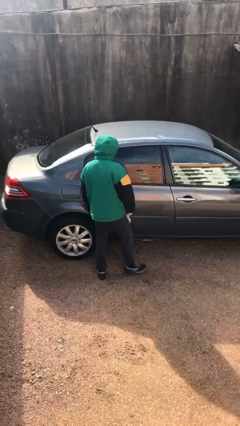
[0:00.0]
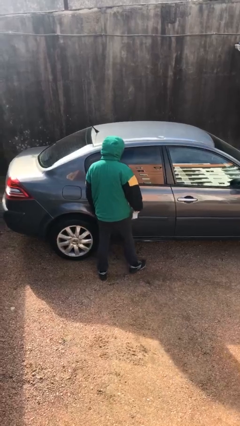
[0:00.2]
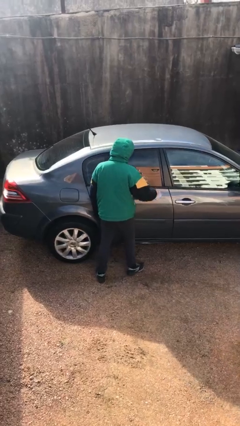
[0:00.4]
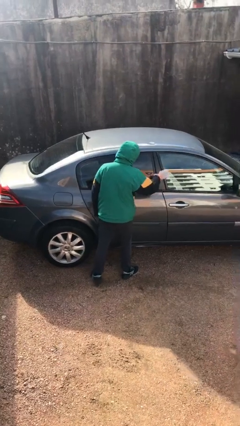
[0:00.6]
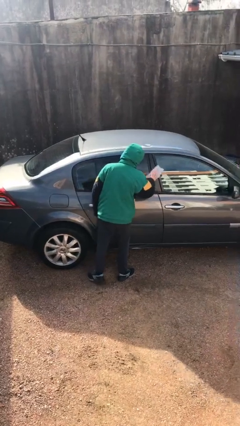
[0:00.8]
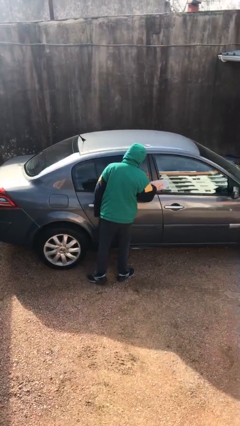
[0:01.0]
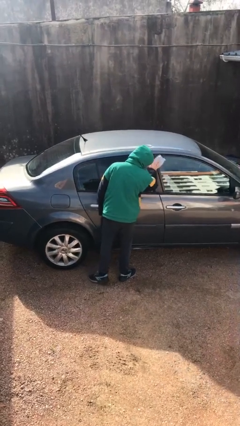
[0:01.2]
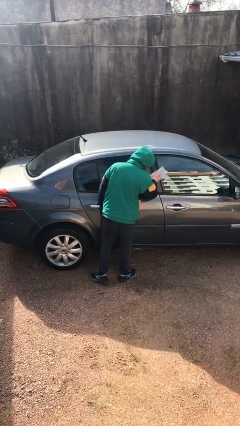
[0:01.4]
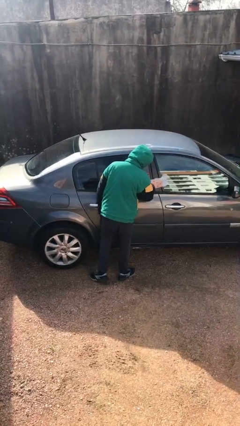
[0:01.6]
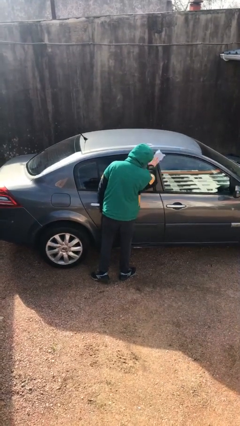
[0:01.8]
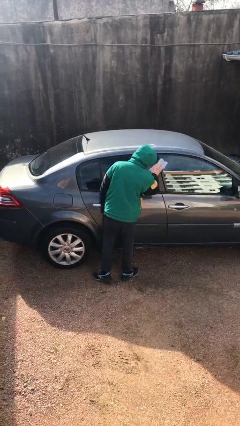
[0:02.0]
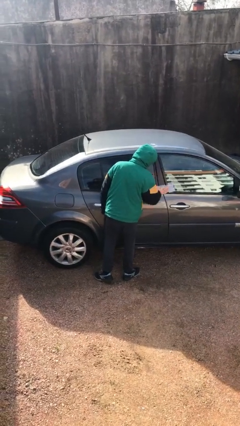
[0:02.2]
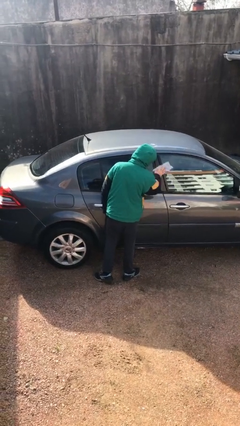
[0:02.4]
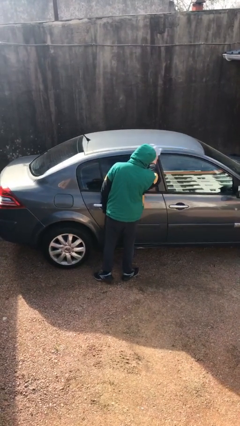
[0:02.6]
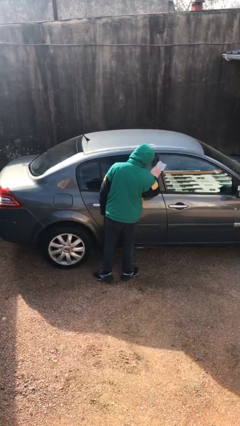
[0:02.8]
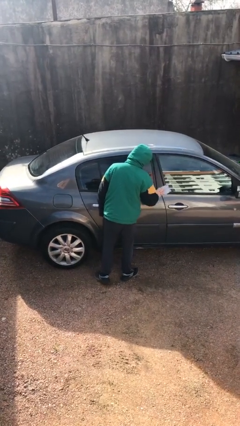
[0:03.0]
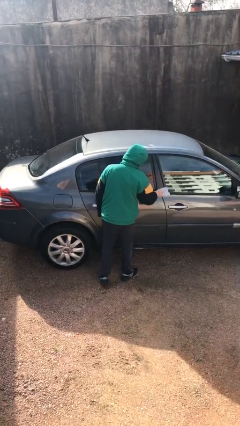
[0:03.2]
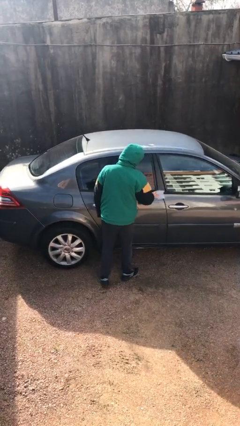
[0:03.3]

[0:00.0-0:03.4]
person polishes car with rag

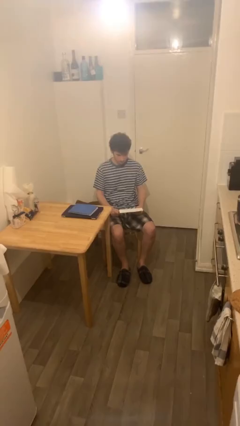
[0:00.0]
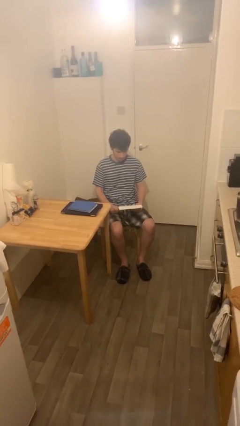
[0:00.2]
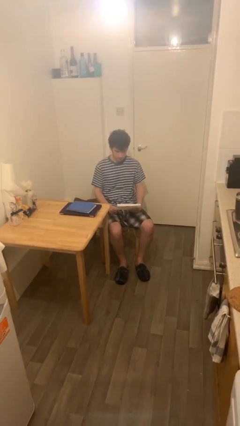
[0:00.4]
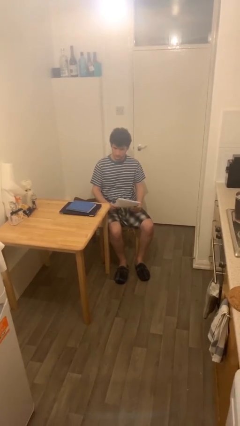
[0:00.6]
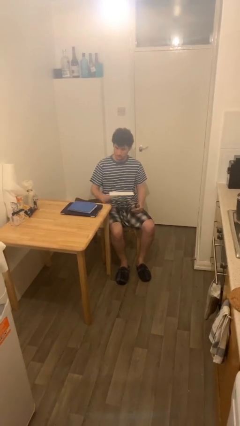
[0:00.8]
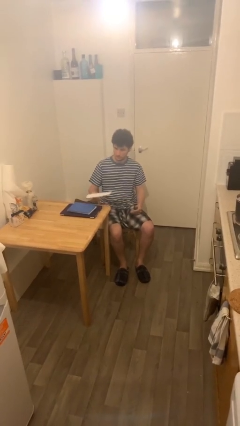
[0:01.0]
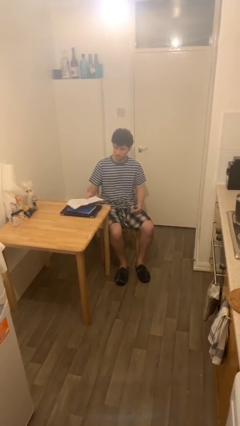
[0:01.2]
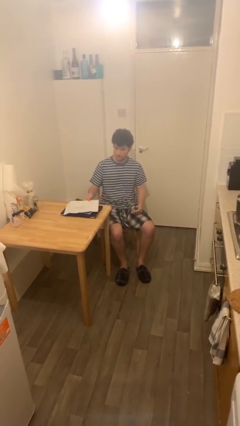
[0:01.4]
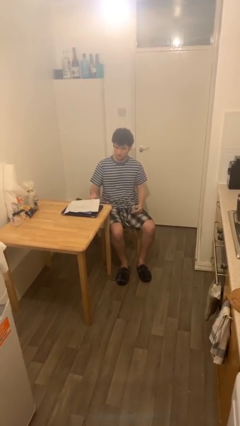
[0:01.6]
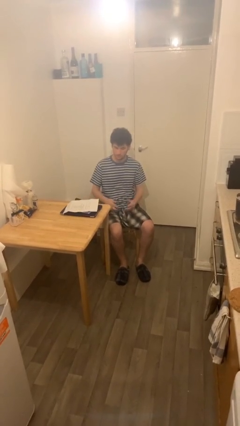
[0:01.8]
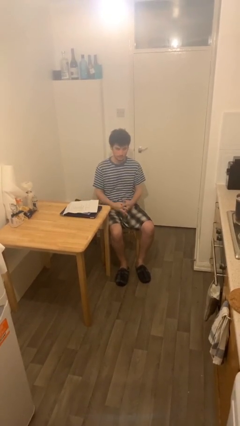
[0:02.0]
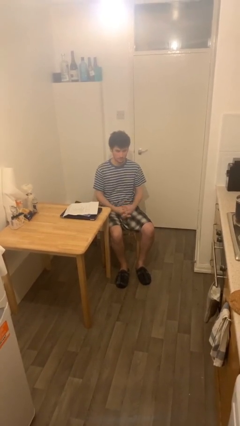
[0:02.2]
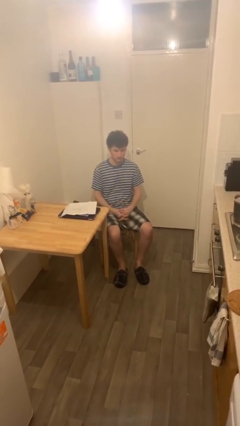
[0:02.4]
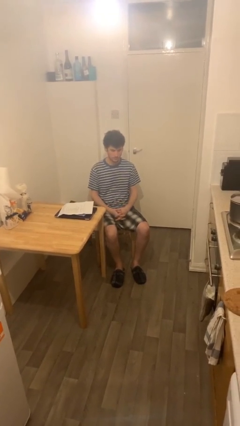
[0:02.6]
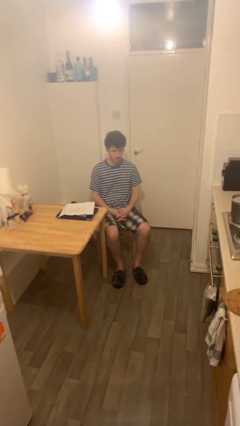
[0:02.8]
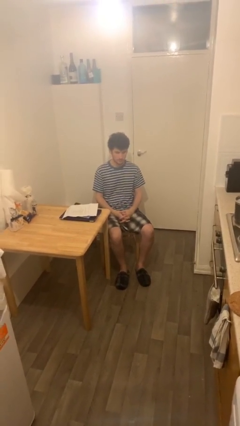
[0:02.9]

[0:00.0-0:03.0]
person puts down object on table

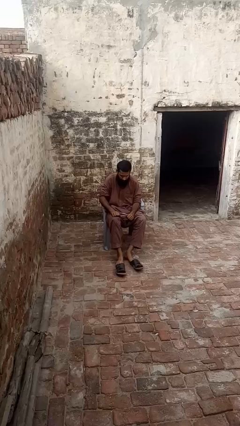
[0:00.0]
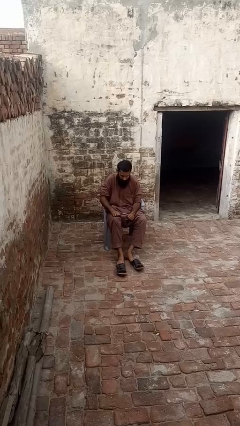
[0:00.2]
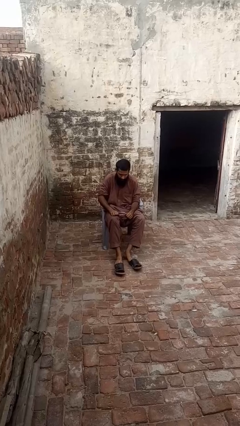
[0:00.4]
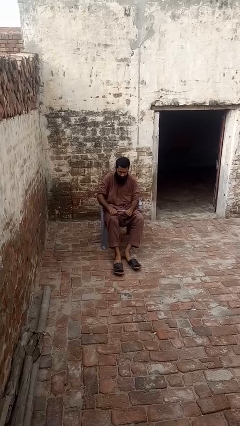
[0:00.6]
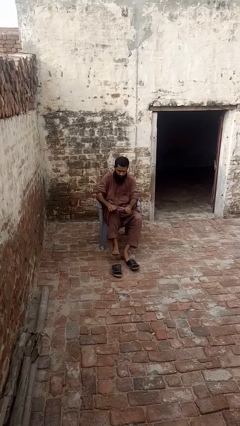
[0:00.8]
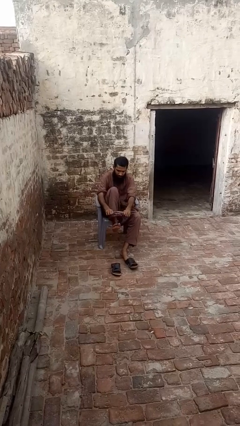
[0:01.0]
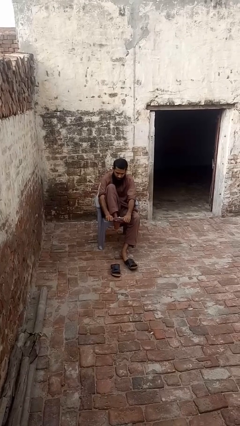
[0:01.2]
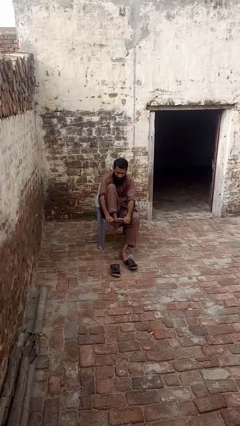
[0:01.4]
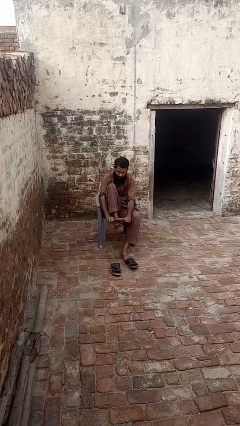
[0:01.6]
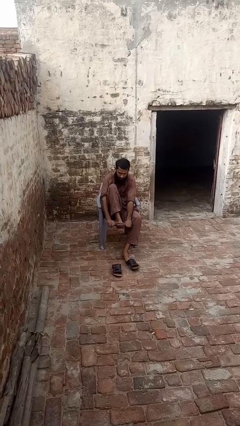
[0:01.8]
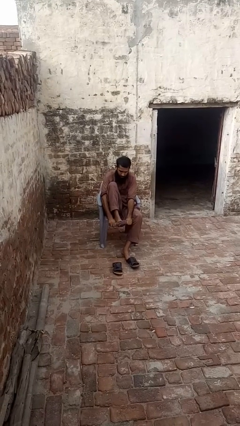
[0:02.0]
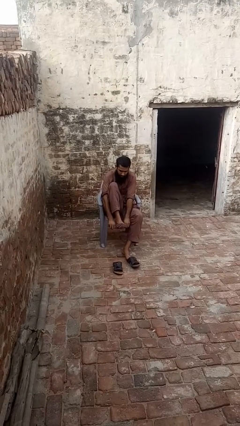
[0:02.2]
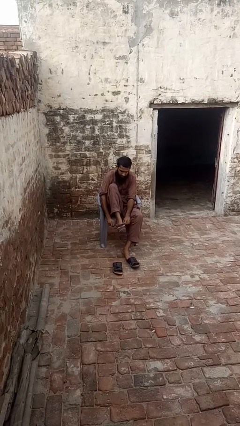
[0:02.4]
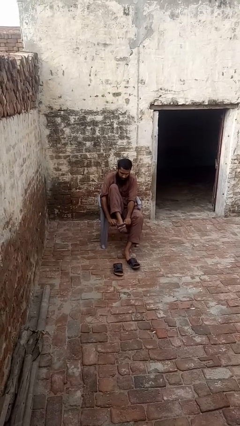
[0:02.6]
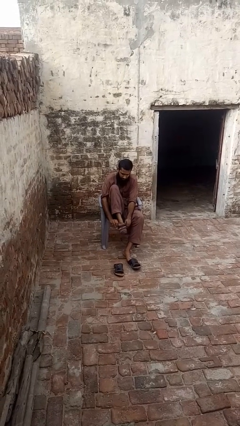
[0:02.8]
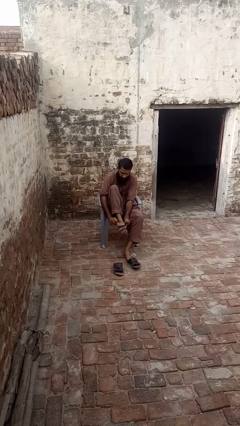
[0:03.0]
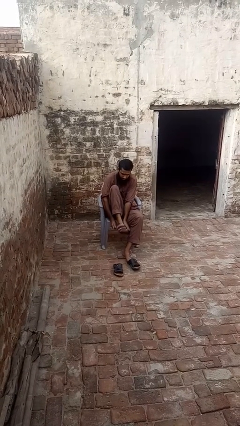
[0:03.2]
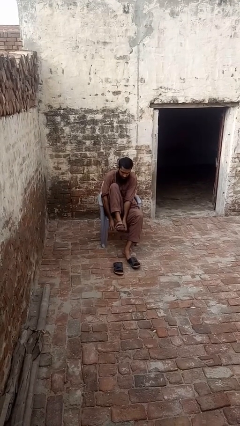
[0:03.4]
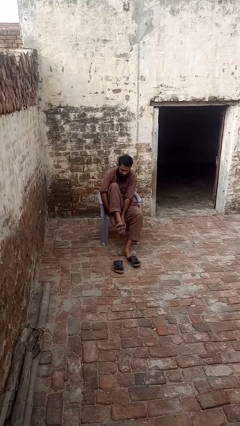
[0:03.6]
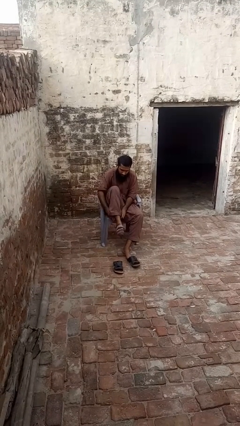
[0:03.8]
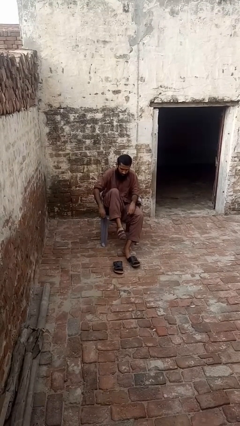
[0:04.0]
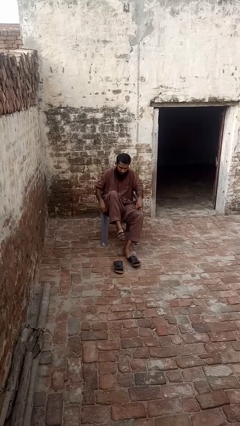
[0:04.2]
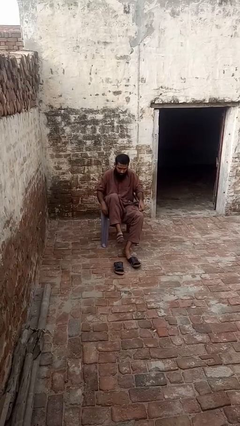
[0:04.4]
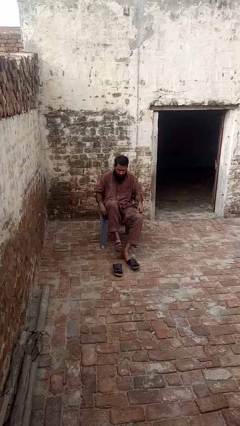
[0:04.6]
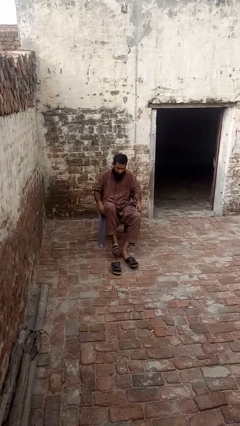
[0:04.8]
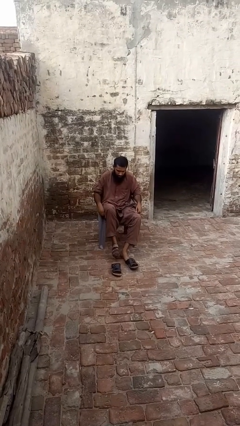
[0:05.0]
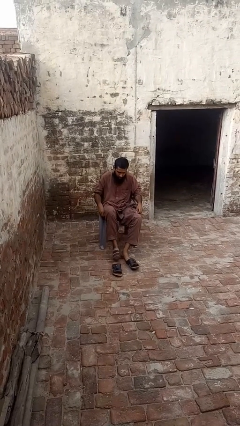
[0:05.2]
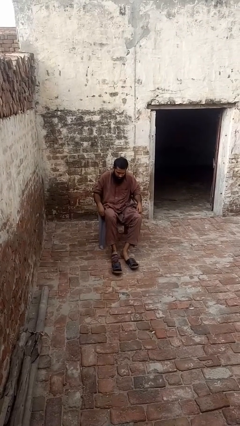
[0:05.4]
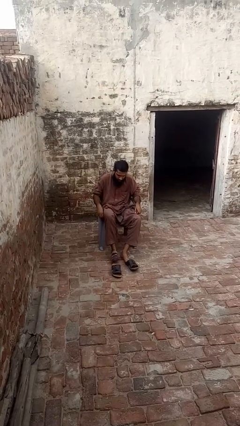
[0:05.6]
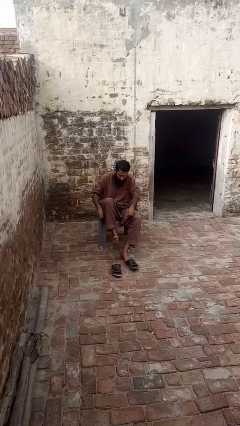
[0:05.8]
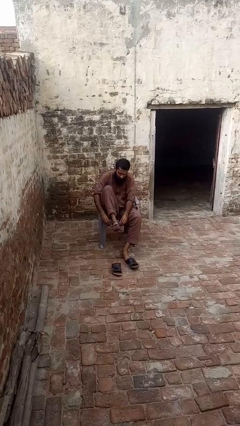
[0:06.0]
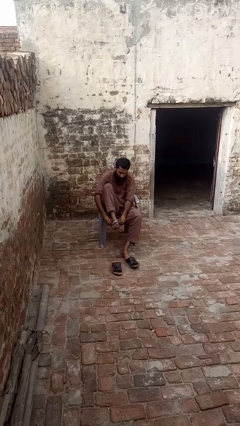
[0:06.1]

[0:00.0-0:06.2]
person puts on socks

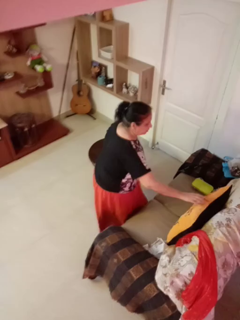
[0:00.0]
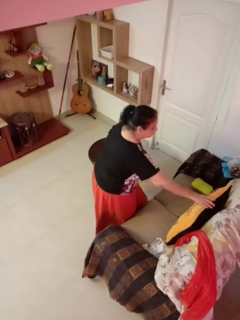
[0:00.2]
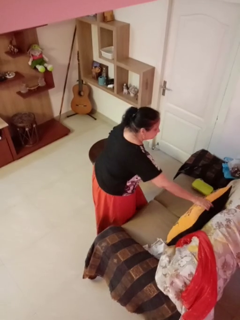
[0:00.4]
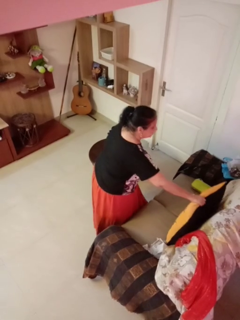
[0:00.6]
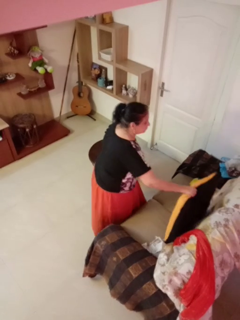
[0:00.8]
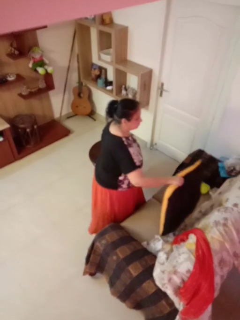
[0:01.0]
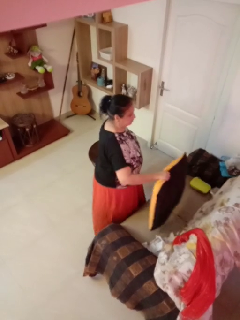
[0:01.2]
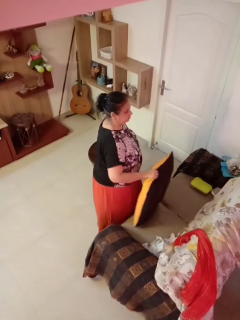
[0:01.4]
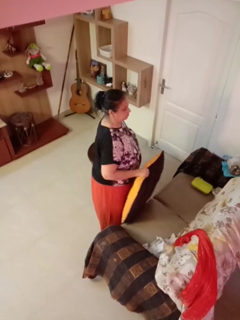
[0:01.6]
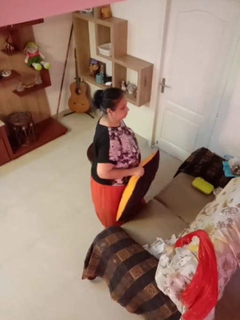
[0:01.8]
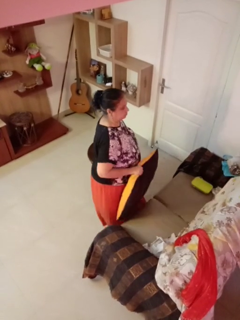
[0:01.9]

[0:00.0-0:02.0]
person picks up object from couch

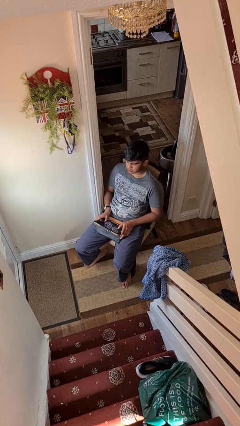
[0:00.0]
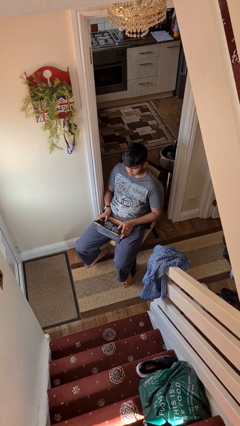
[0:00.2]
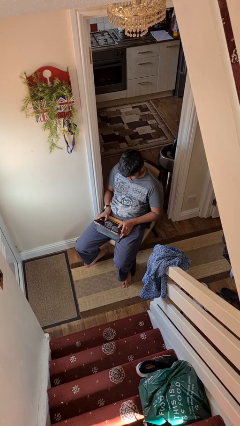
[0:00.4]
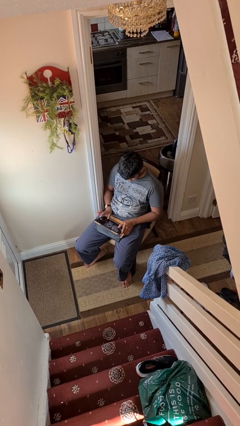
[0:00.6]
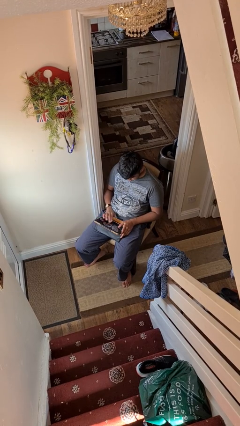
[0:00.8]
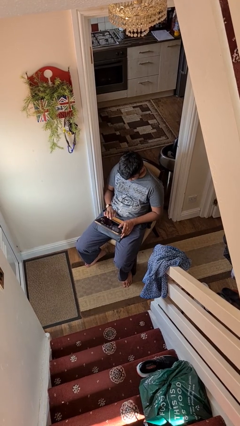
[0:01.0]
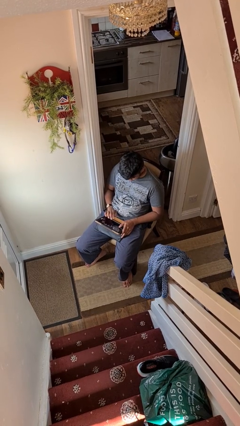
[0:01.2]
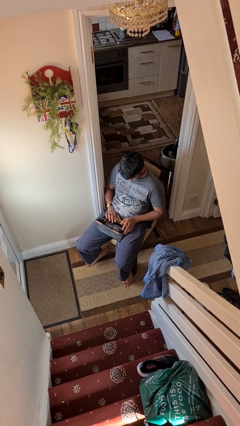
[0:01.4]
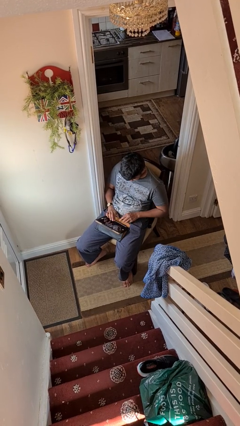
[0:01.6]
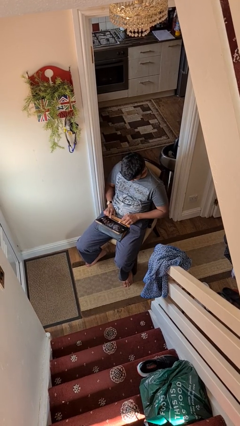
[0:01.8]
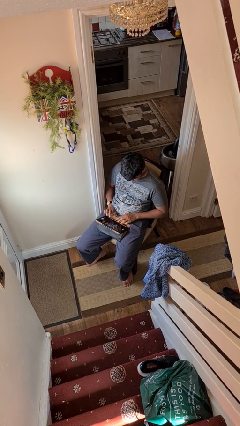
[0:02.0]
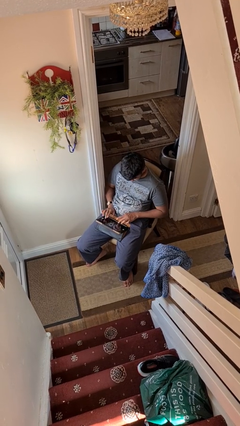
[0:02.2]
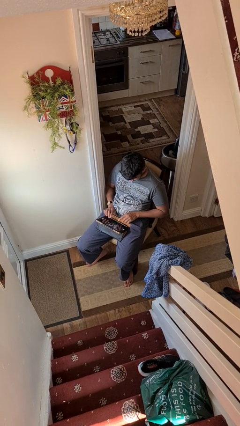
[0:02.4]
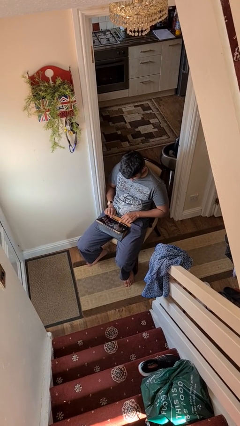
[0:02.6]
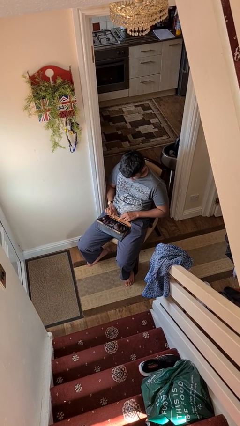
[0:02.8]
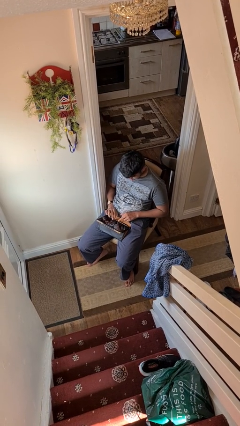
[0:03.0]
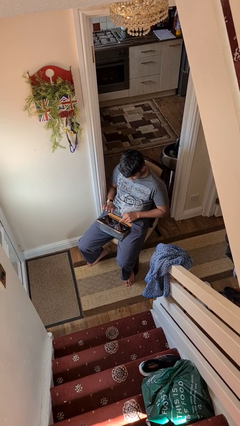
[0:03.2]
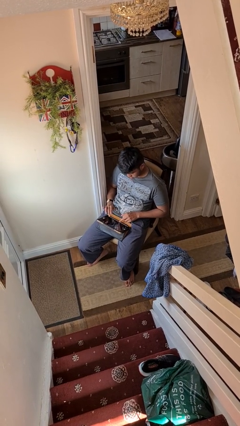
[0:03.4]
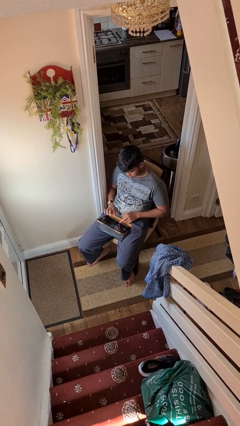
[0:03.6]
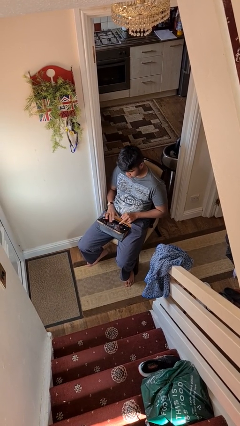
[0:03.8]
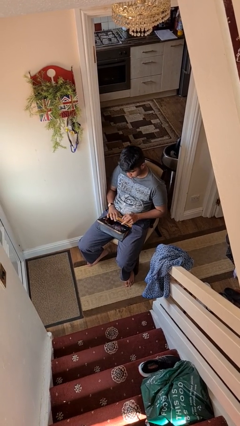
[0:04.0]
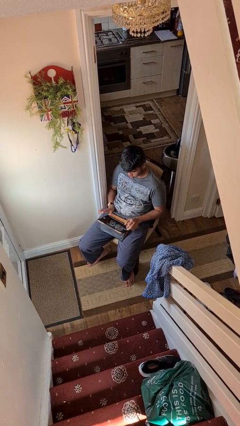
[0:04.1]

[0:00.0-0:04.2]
person interacts with tablet
